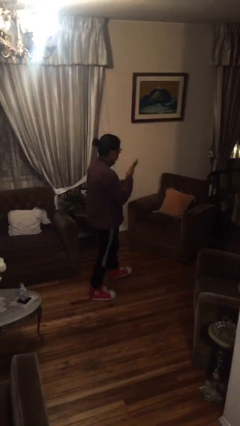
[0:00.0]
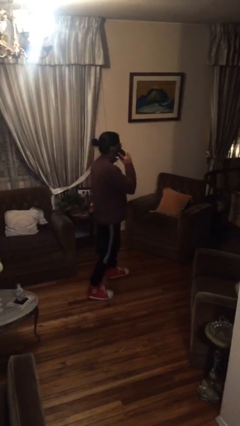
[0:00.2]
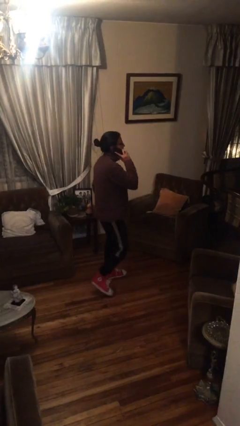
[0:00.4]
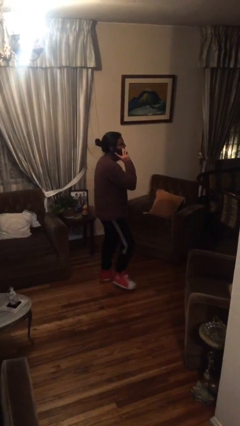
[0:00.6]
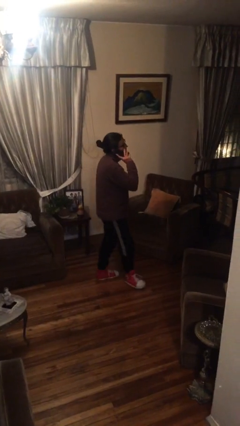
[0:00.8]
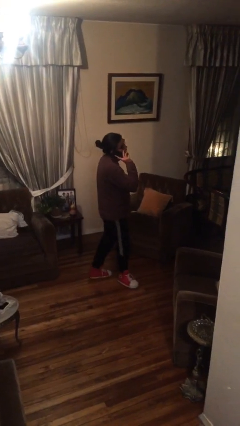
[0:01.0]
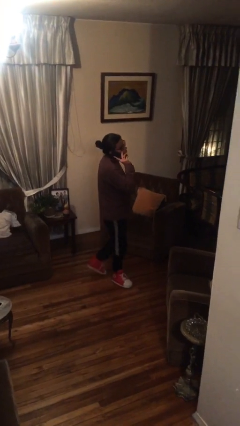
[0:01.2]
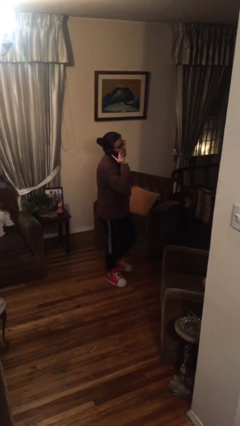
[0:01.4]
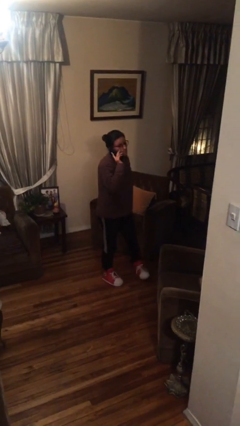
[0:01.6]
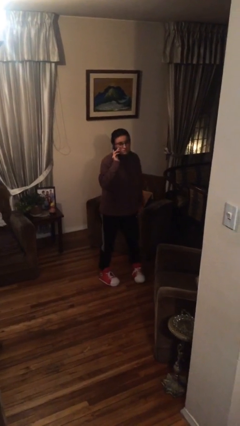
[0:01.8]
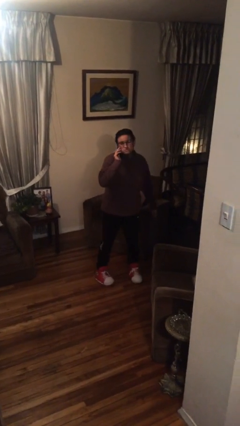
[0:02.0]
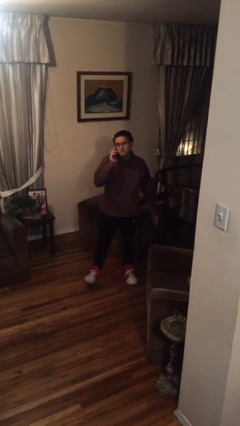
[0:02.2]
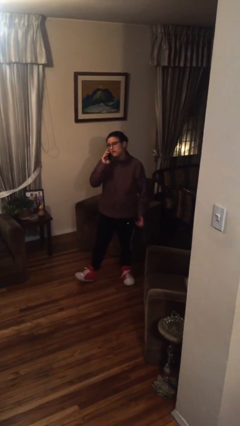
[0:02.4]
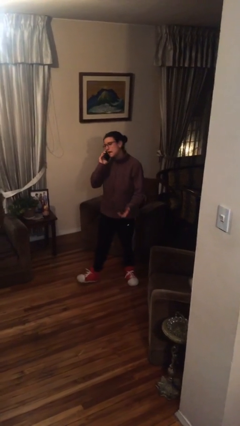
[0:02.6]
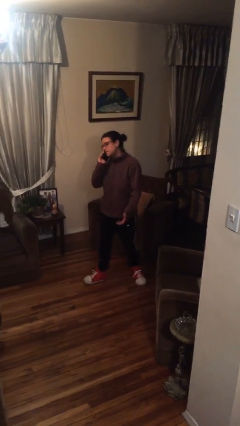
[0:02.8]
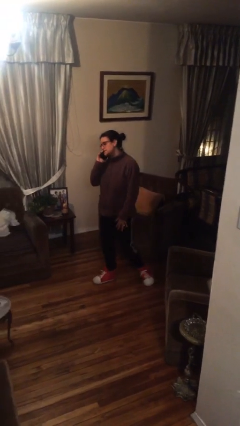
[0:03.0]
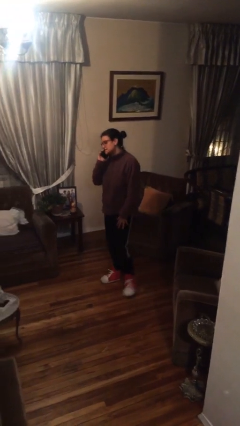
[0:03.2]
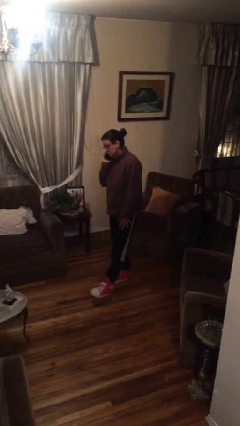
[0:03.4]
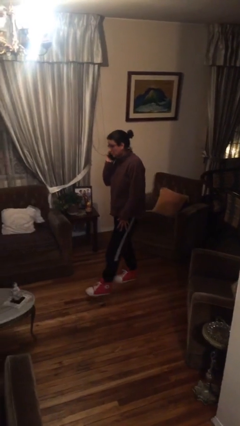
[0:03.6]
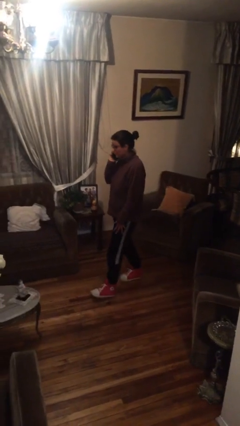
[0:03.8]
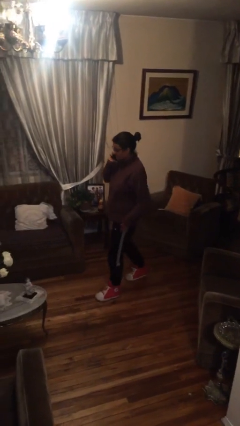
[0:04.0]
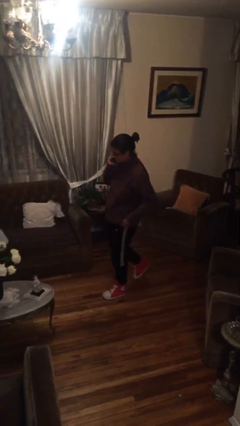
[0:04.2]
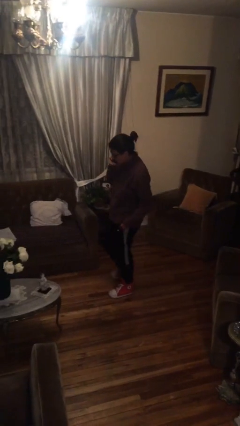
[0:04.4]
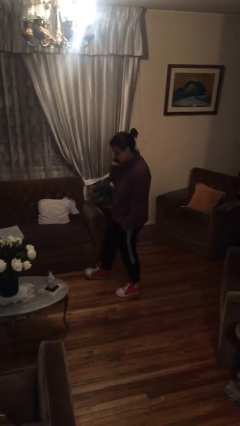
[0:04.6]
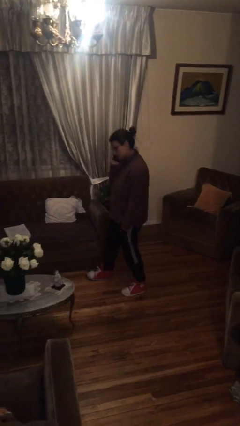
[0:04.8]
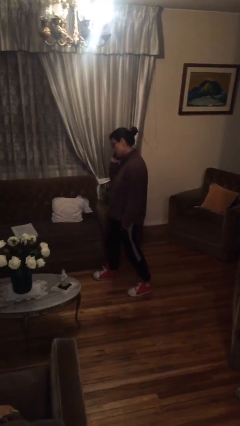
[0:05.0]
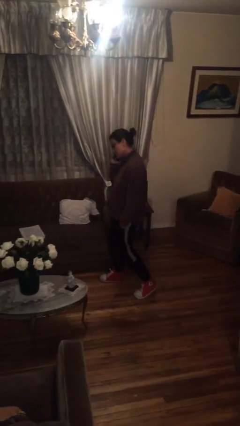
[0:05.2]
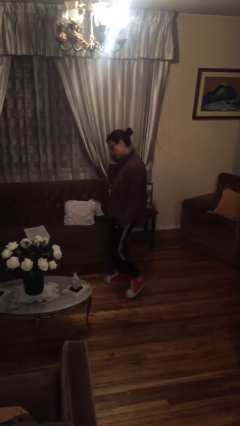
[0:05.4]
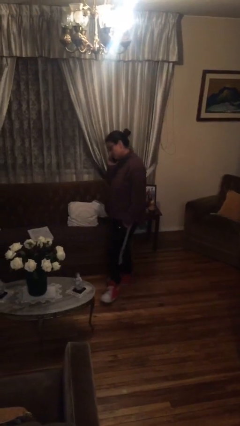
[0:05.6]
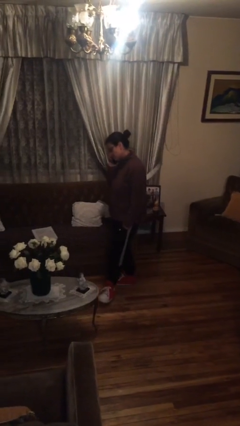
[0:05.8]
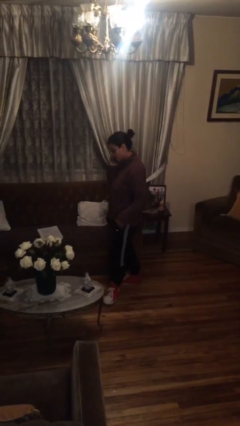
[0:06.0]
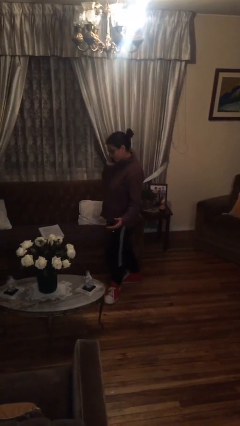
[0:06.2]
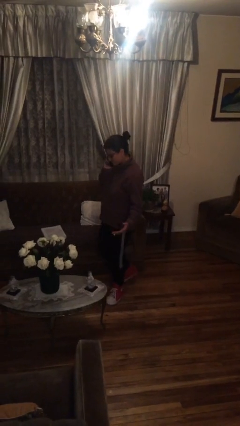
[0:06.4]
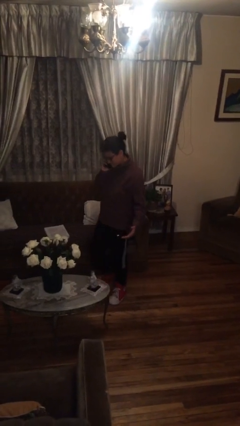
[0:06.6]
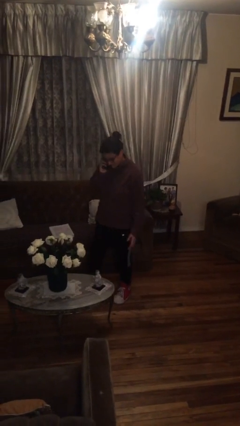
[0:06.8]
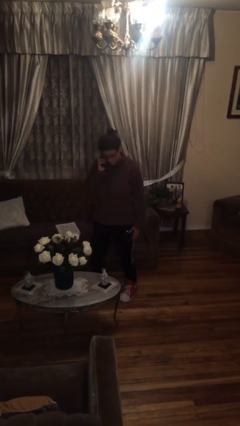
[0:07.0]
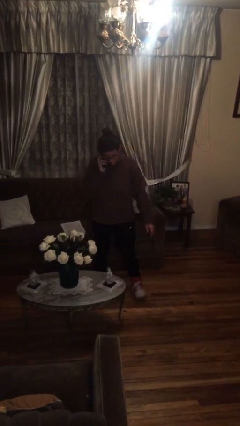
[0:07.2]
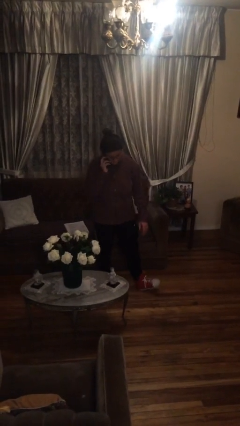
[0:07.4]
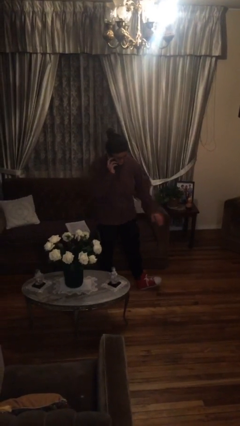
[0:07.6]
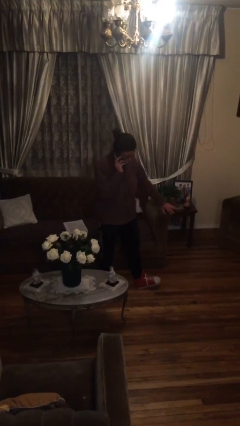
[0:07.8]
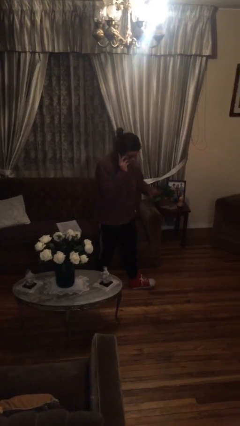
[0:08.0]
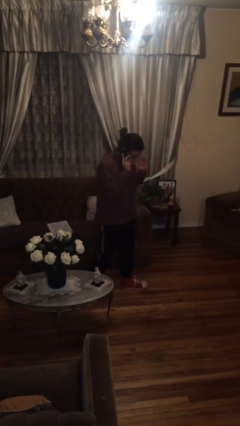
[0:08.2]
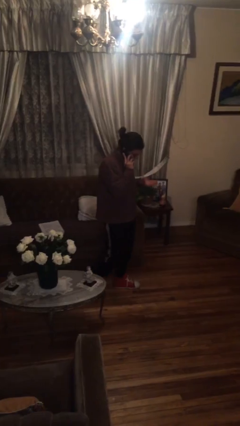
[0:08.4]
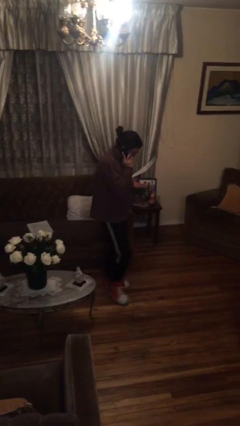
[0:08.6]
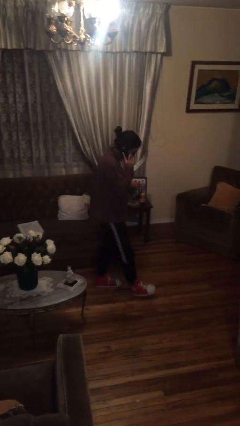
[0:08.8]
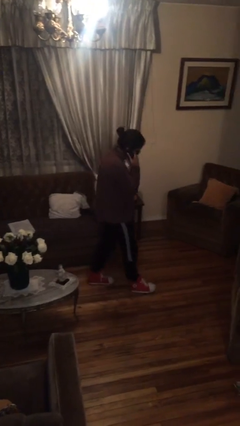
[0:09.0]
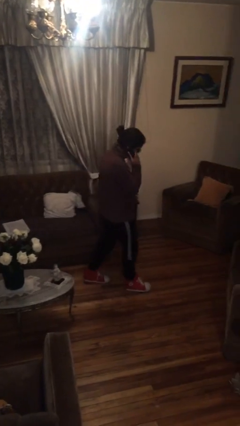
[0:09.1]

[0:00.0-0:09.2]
person talks on phone

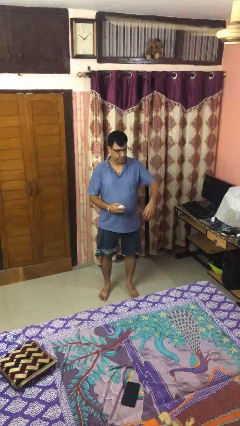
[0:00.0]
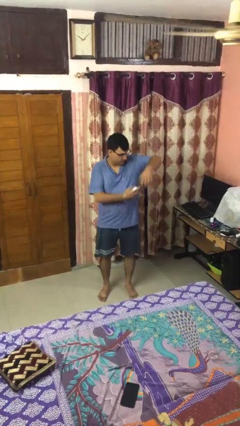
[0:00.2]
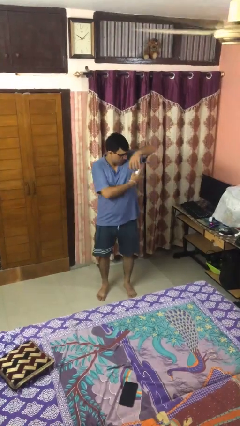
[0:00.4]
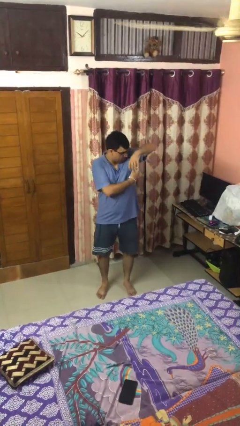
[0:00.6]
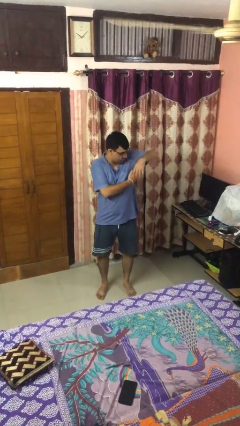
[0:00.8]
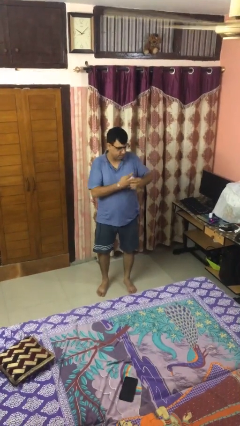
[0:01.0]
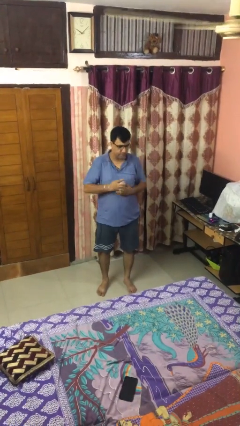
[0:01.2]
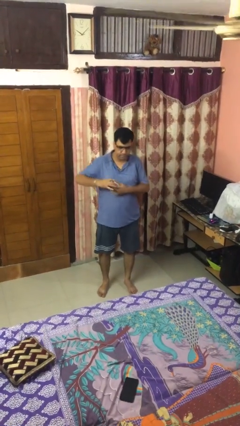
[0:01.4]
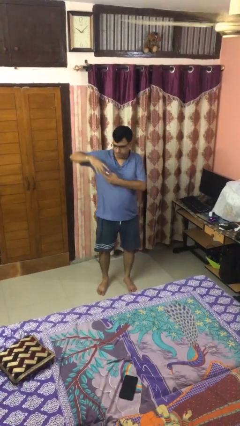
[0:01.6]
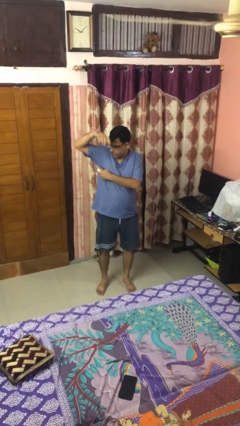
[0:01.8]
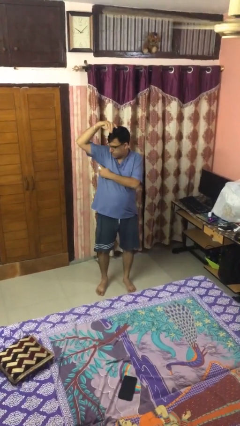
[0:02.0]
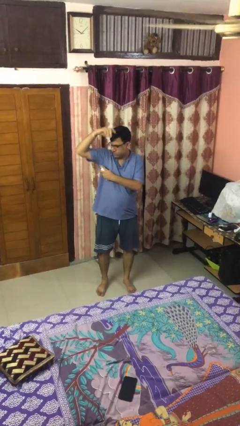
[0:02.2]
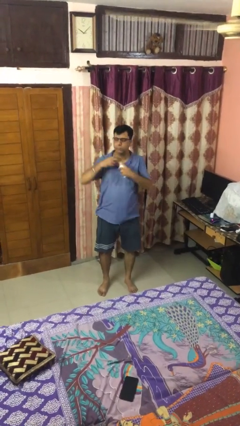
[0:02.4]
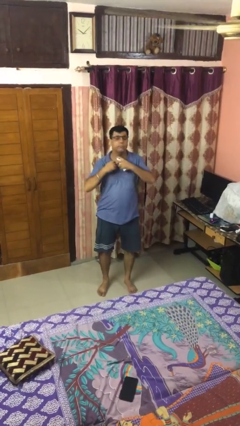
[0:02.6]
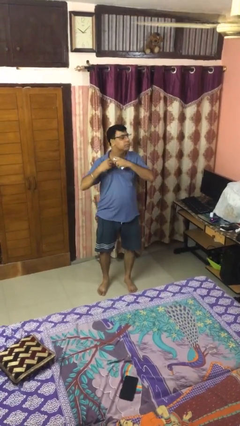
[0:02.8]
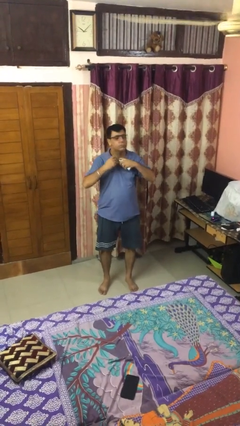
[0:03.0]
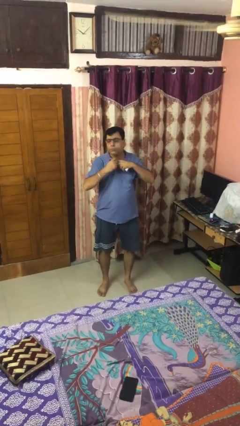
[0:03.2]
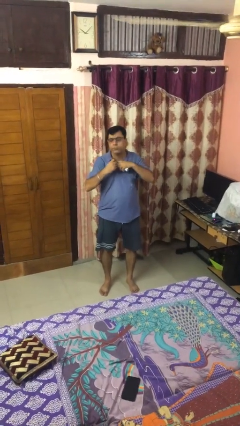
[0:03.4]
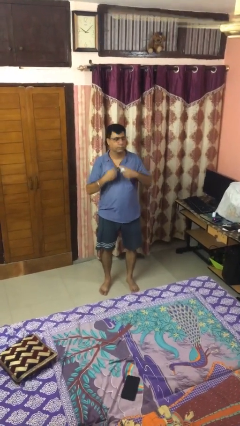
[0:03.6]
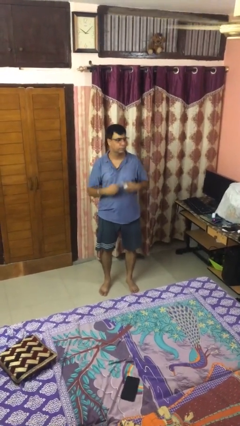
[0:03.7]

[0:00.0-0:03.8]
person applies deodorant

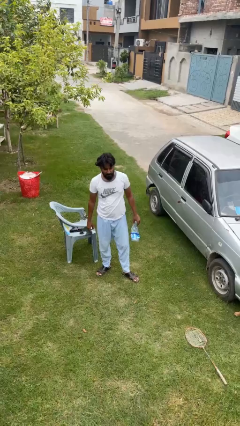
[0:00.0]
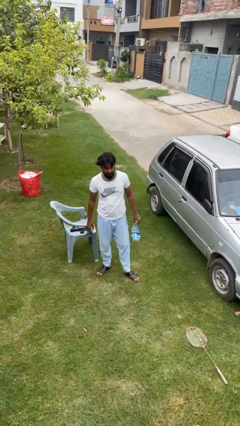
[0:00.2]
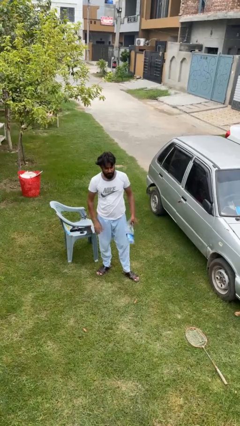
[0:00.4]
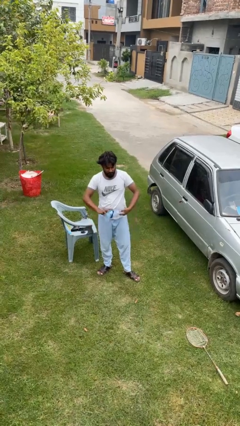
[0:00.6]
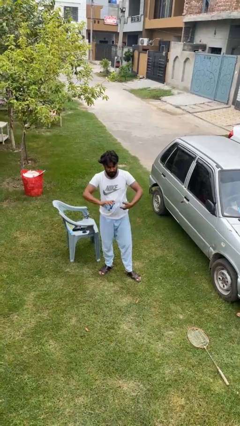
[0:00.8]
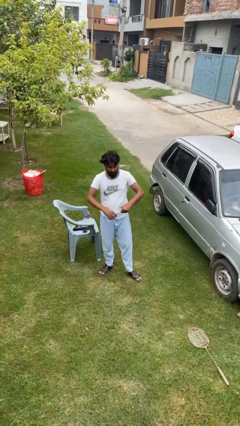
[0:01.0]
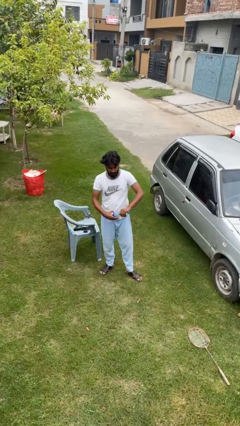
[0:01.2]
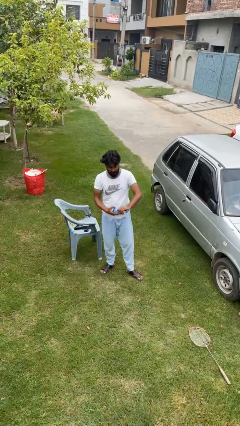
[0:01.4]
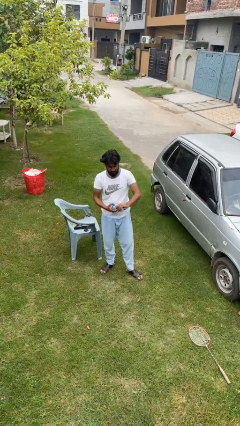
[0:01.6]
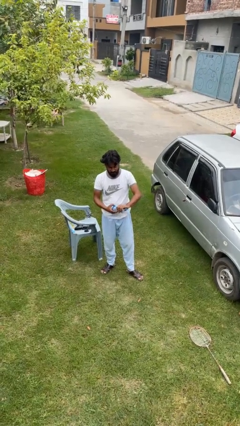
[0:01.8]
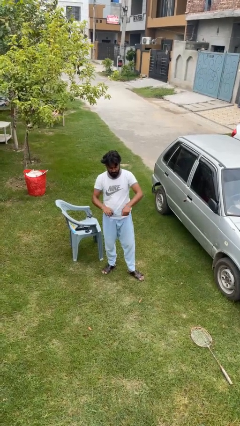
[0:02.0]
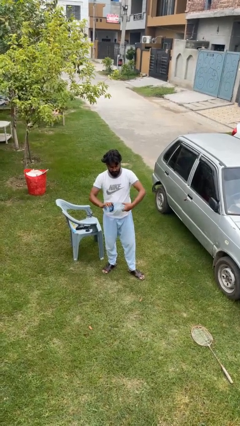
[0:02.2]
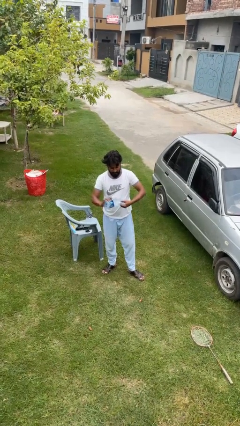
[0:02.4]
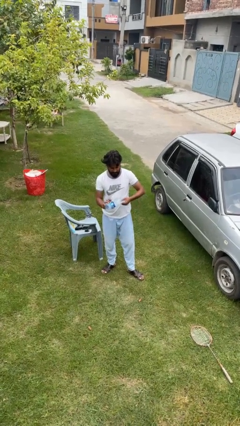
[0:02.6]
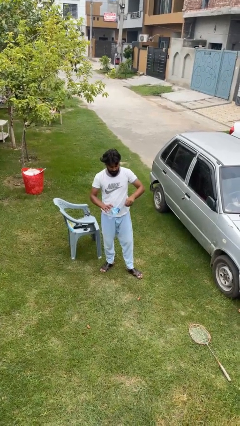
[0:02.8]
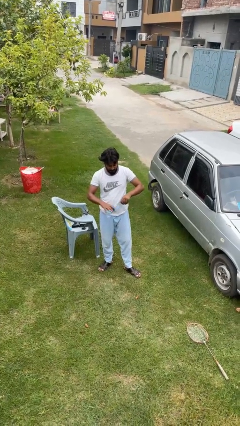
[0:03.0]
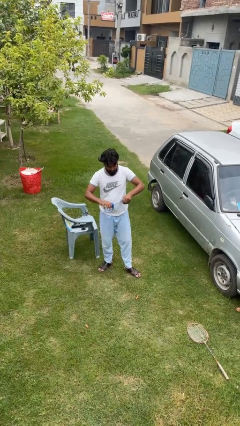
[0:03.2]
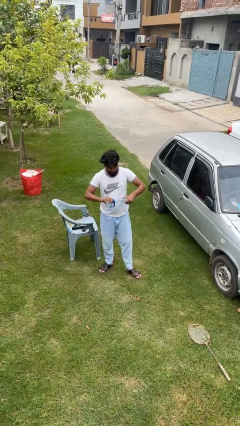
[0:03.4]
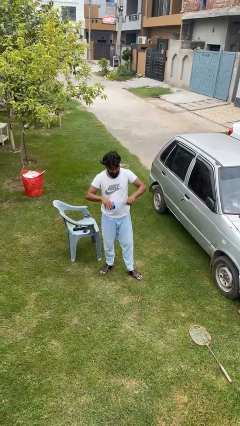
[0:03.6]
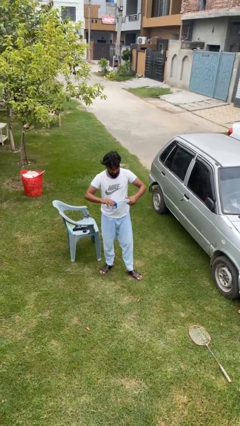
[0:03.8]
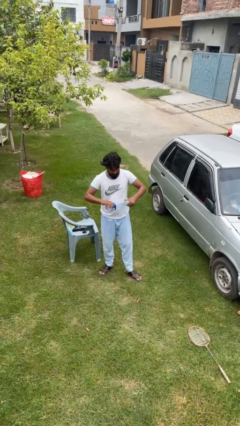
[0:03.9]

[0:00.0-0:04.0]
person squeezes object

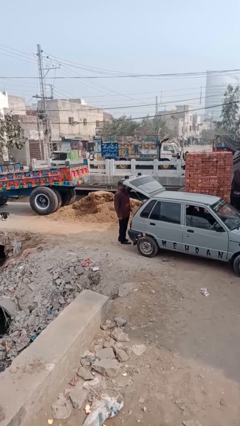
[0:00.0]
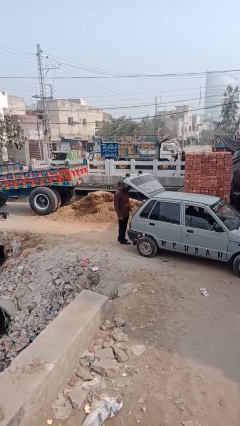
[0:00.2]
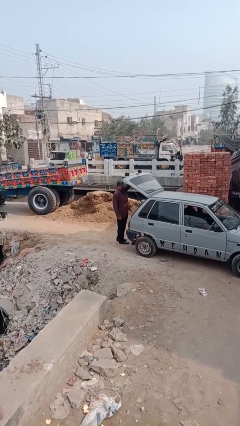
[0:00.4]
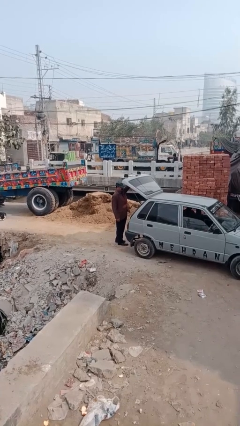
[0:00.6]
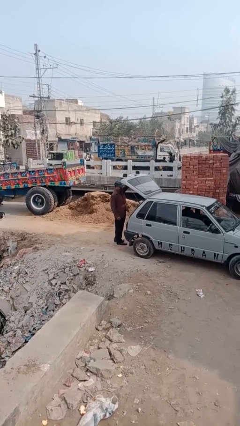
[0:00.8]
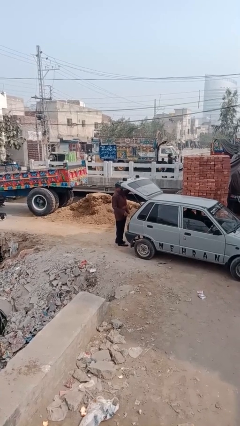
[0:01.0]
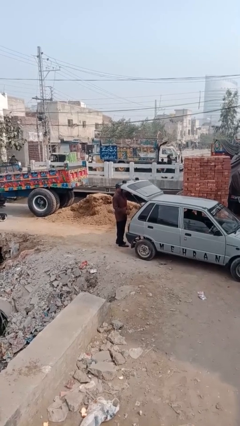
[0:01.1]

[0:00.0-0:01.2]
person opens car trunk
